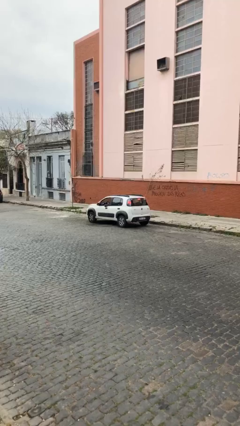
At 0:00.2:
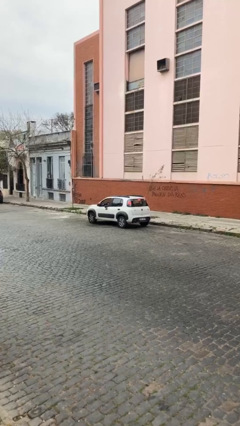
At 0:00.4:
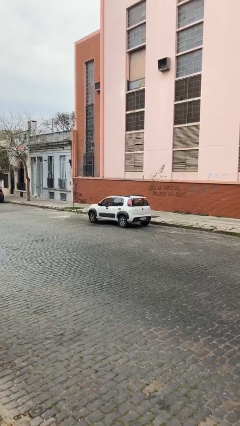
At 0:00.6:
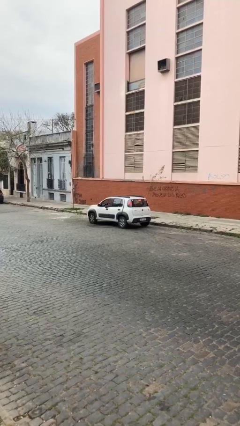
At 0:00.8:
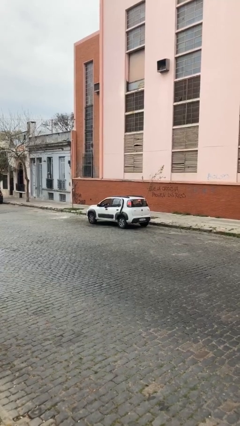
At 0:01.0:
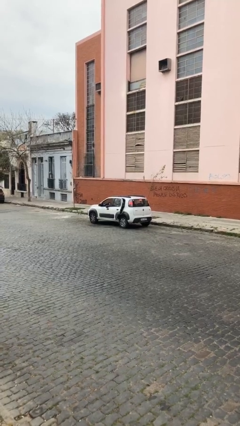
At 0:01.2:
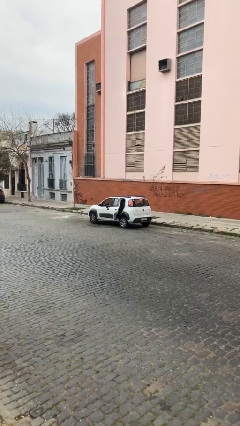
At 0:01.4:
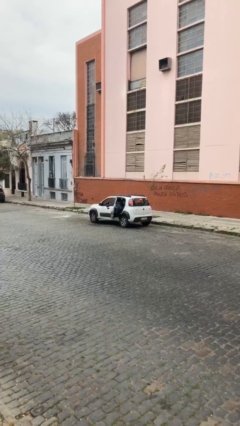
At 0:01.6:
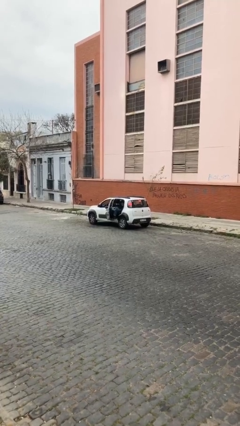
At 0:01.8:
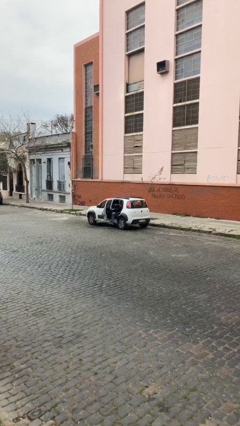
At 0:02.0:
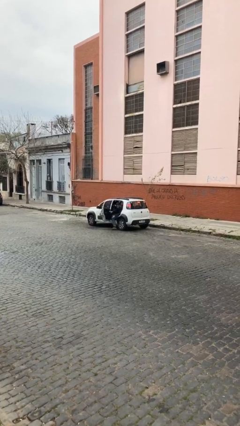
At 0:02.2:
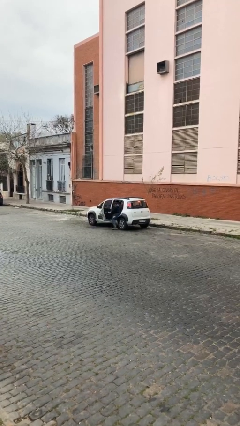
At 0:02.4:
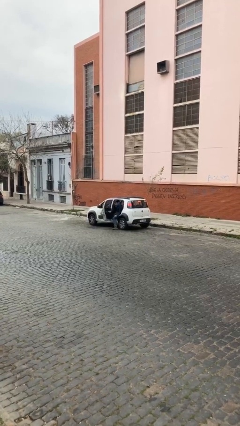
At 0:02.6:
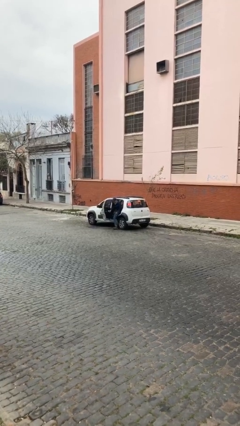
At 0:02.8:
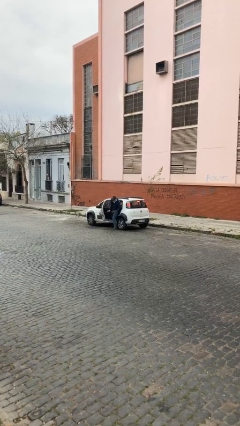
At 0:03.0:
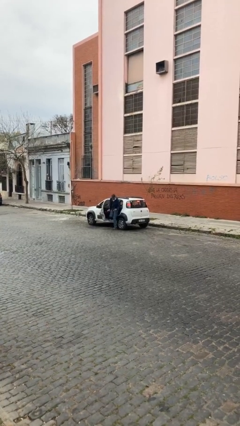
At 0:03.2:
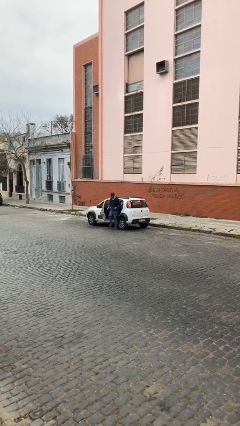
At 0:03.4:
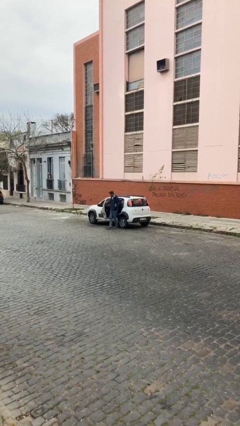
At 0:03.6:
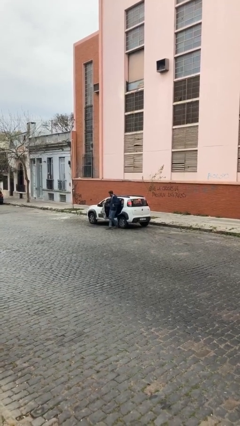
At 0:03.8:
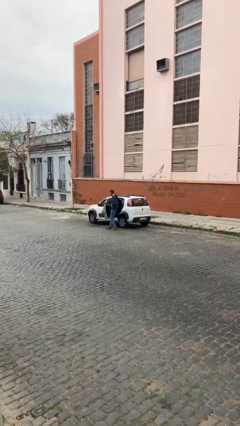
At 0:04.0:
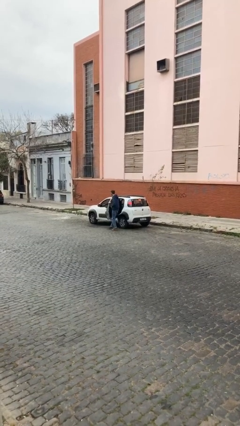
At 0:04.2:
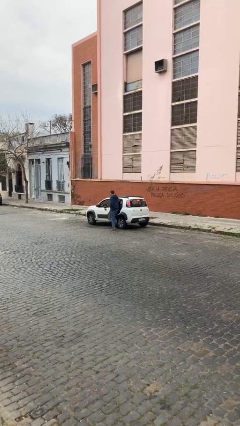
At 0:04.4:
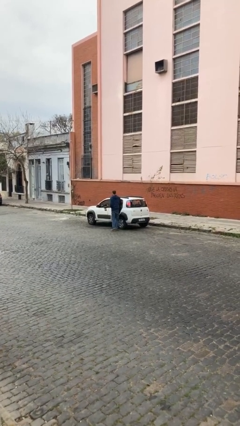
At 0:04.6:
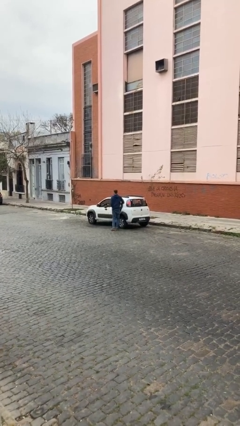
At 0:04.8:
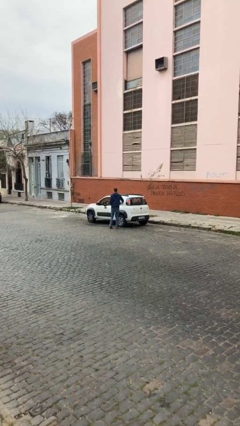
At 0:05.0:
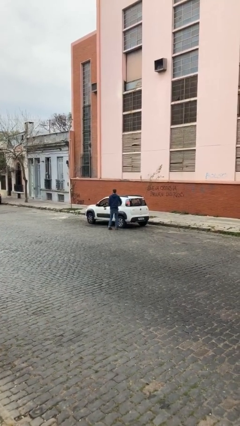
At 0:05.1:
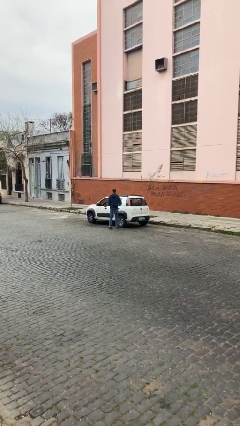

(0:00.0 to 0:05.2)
car drops off person

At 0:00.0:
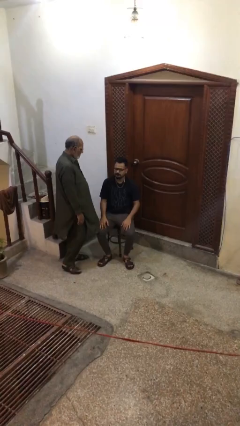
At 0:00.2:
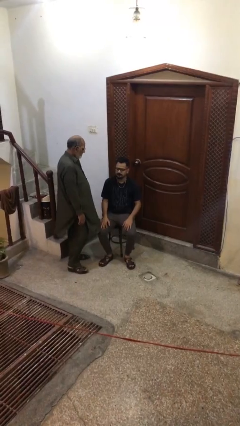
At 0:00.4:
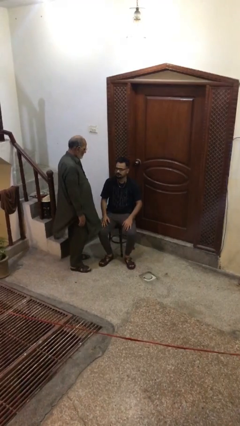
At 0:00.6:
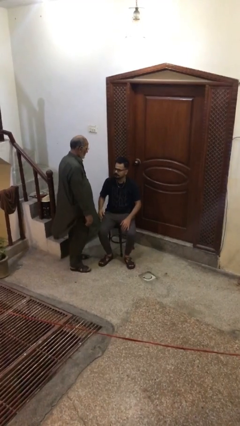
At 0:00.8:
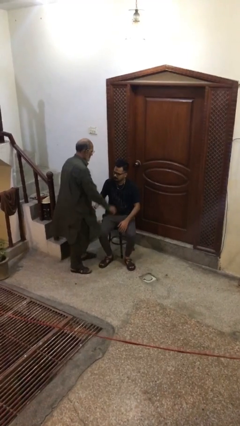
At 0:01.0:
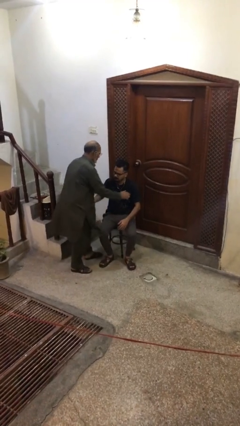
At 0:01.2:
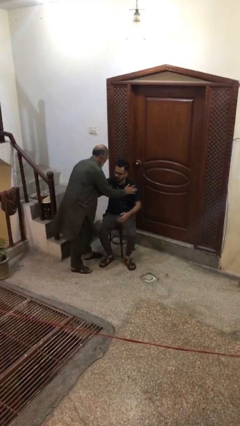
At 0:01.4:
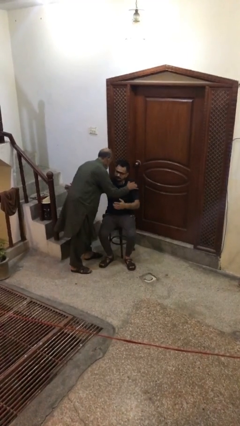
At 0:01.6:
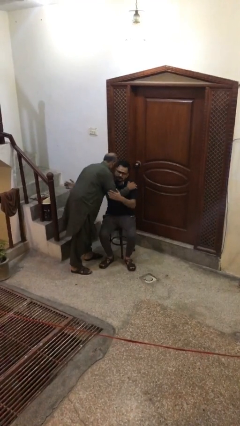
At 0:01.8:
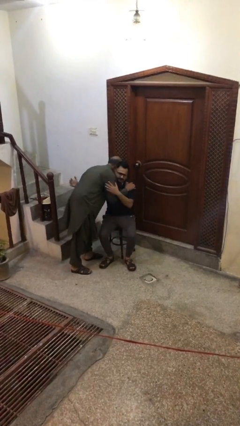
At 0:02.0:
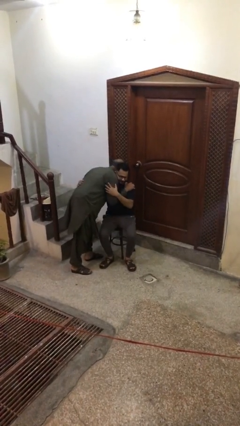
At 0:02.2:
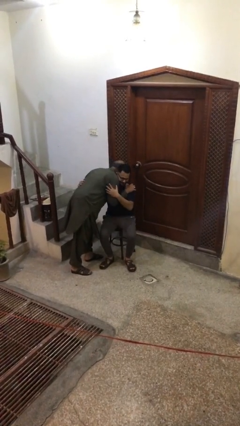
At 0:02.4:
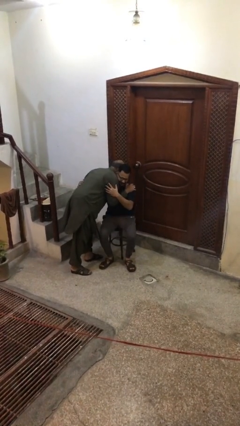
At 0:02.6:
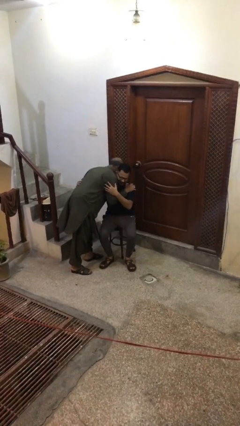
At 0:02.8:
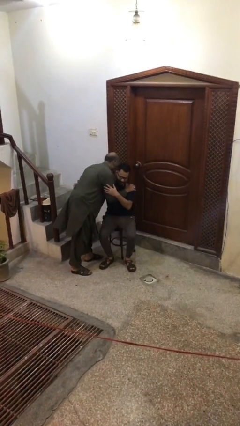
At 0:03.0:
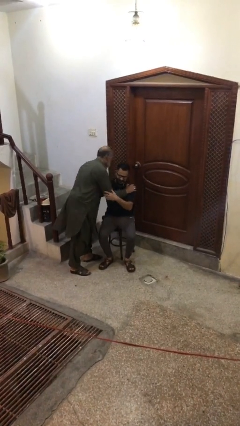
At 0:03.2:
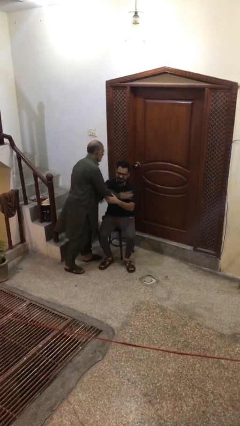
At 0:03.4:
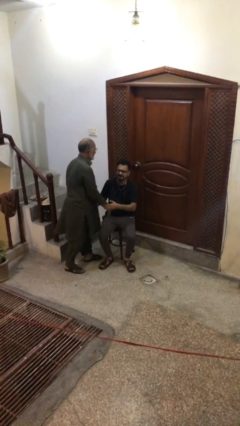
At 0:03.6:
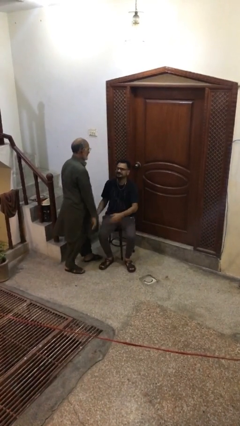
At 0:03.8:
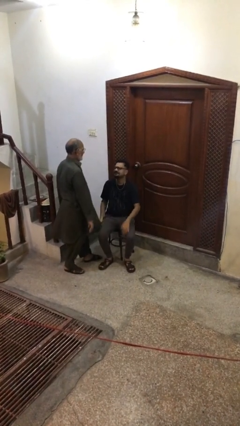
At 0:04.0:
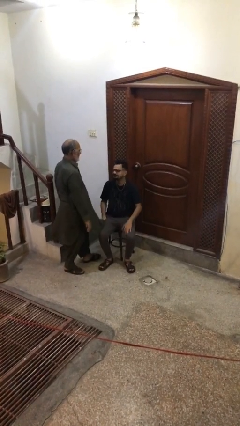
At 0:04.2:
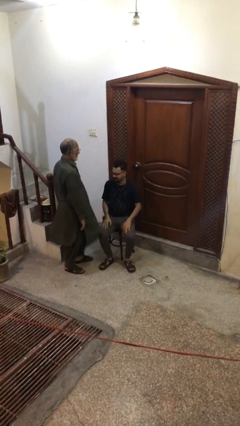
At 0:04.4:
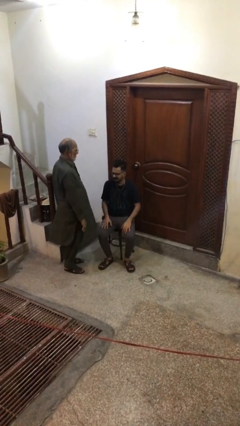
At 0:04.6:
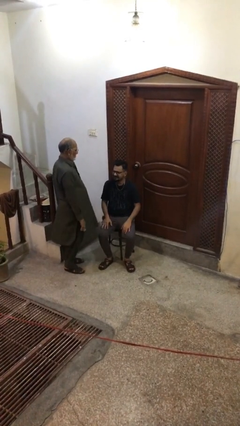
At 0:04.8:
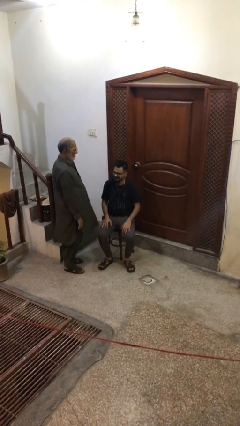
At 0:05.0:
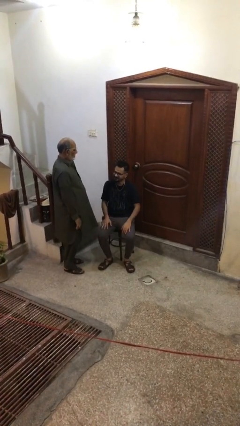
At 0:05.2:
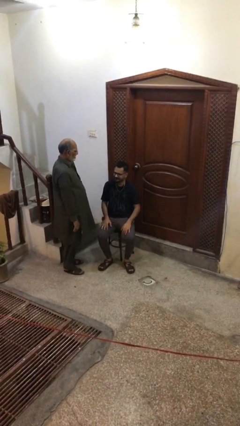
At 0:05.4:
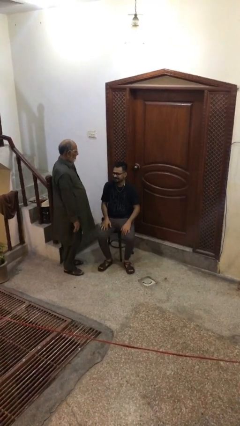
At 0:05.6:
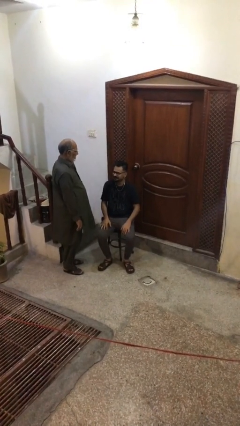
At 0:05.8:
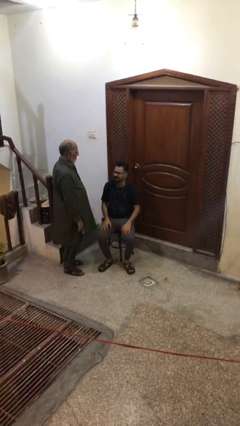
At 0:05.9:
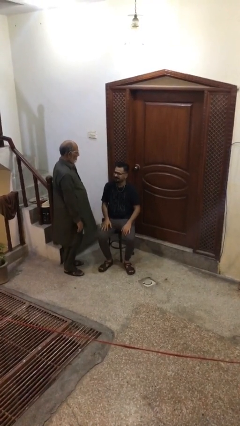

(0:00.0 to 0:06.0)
person embraces person

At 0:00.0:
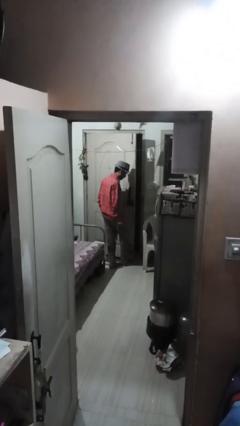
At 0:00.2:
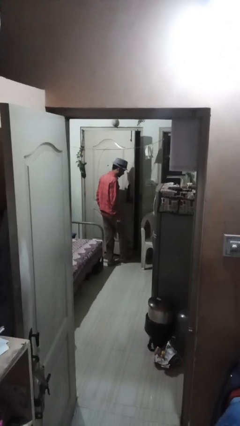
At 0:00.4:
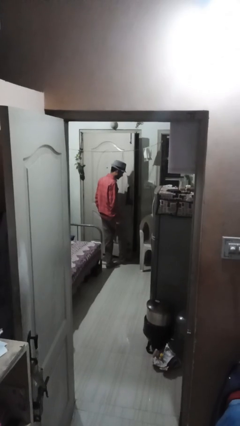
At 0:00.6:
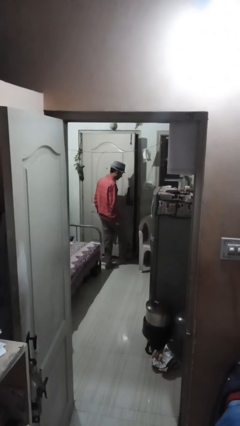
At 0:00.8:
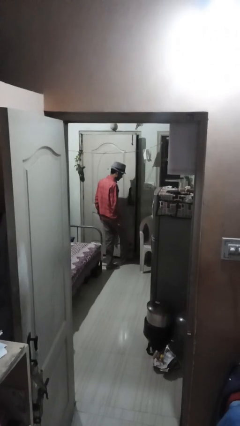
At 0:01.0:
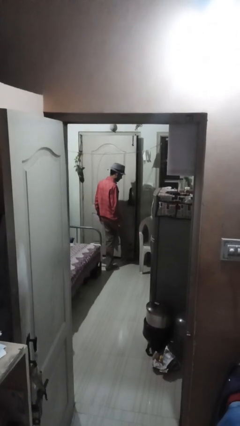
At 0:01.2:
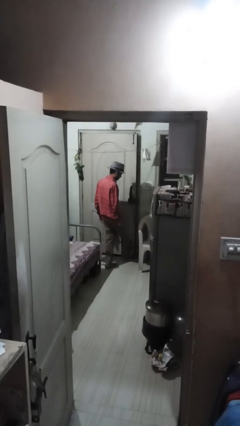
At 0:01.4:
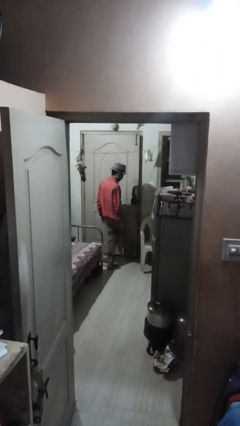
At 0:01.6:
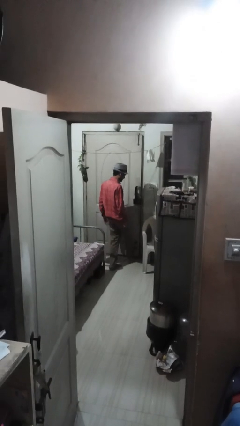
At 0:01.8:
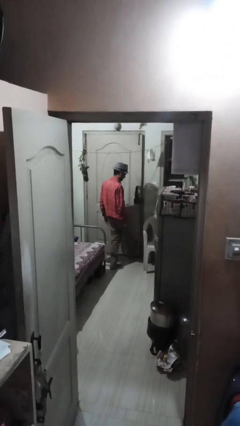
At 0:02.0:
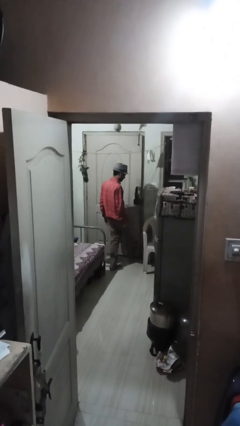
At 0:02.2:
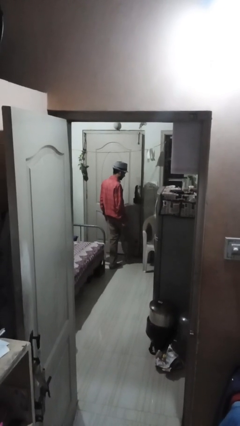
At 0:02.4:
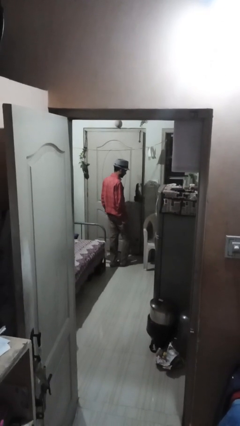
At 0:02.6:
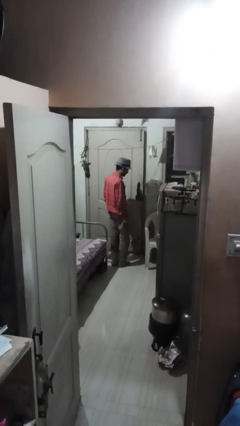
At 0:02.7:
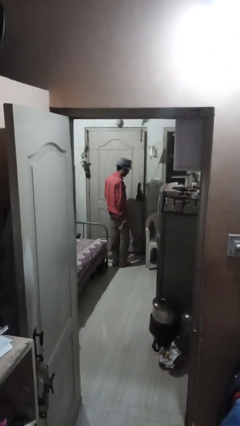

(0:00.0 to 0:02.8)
person closes door with foot

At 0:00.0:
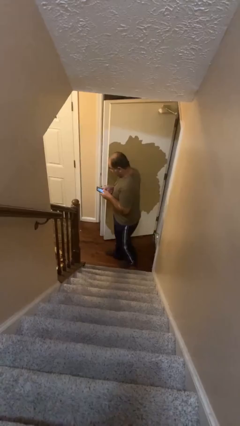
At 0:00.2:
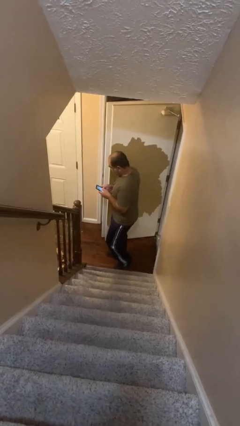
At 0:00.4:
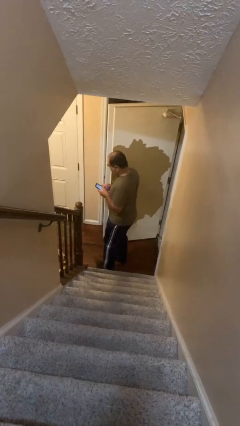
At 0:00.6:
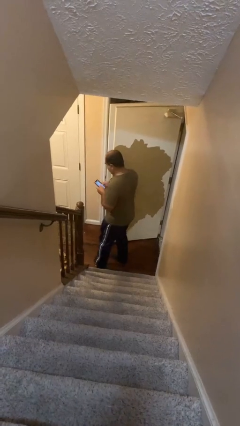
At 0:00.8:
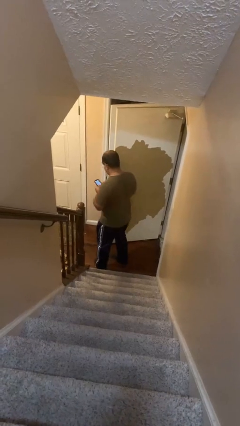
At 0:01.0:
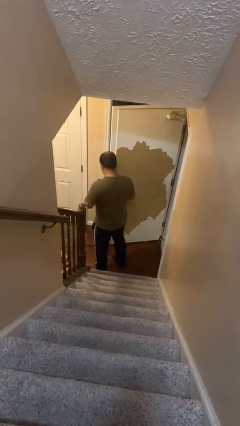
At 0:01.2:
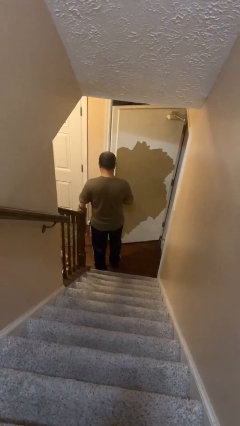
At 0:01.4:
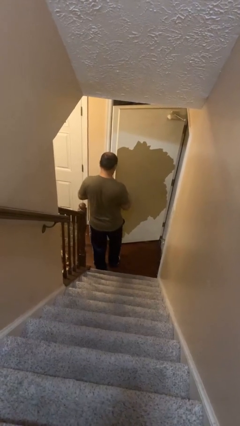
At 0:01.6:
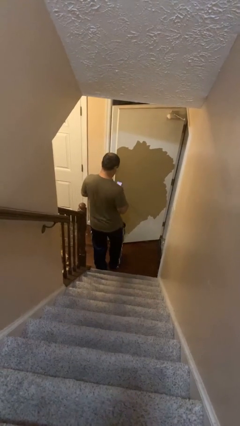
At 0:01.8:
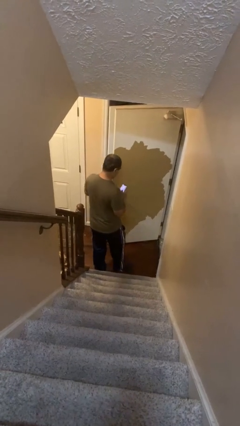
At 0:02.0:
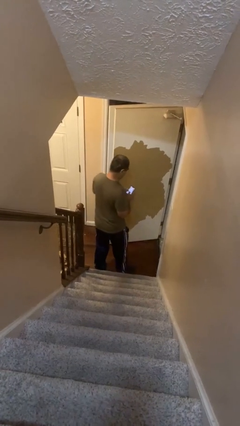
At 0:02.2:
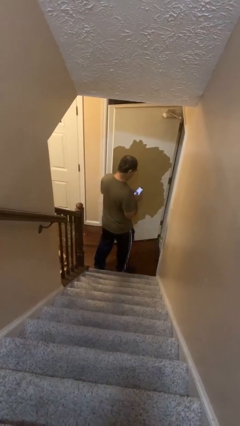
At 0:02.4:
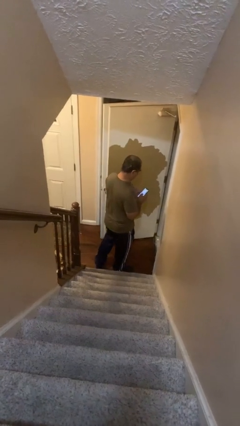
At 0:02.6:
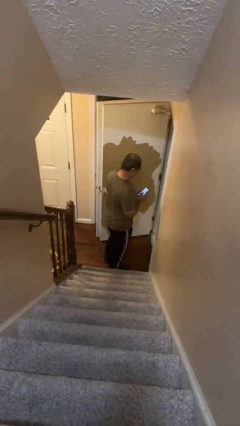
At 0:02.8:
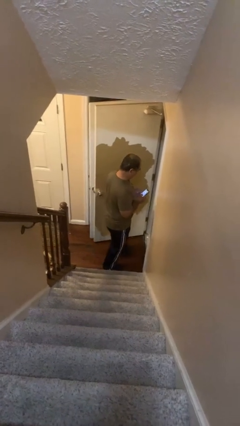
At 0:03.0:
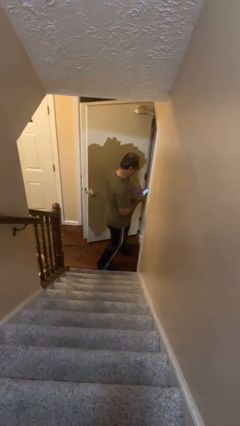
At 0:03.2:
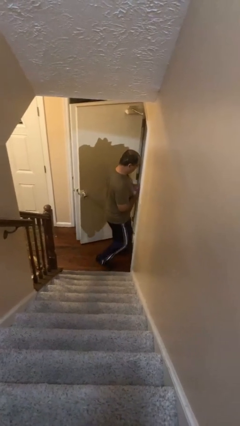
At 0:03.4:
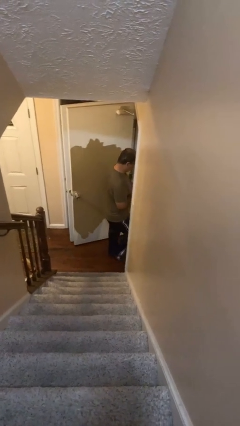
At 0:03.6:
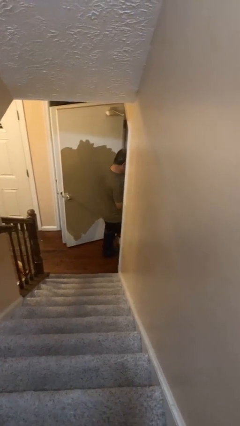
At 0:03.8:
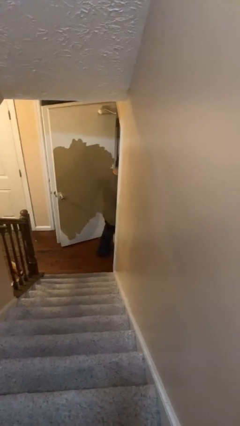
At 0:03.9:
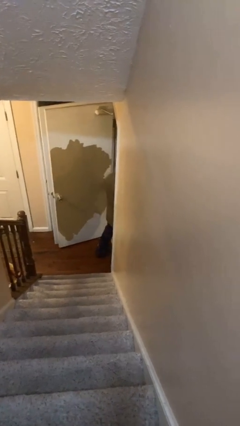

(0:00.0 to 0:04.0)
person exits scene through structure

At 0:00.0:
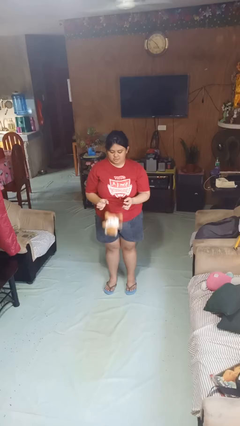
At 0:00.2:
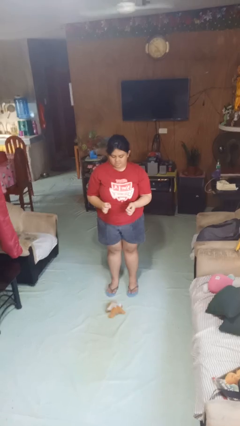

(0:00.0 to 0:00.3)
person drops object
